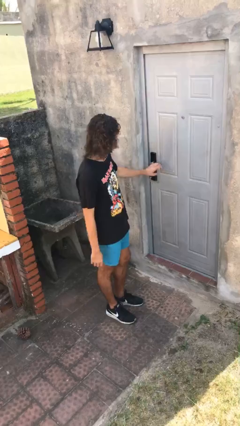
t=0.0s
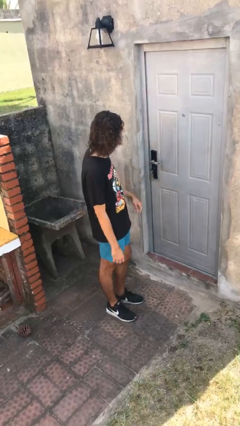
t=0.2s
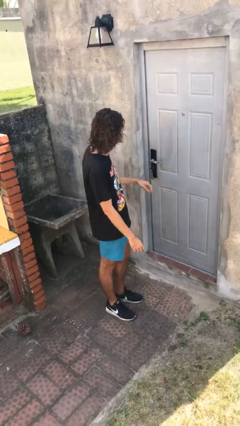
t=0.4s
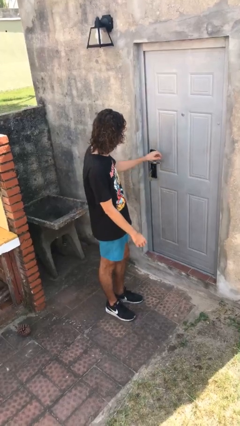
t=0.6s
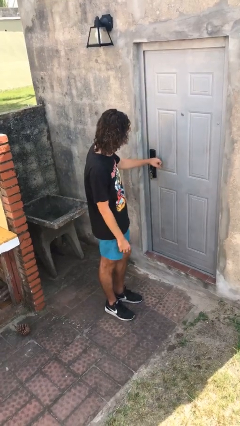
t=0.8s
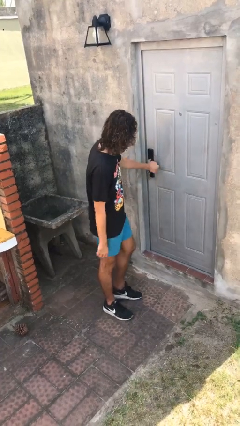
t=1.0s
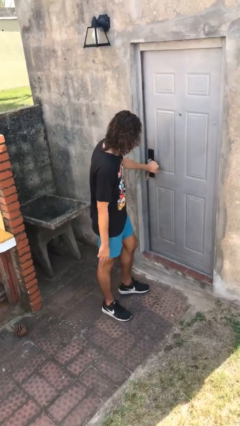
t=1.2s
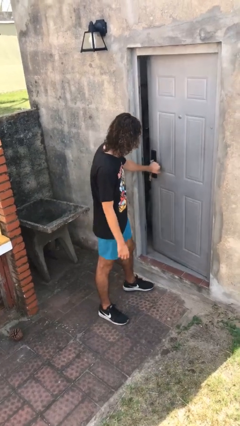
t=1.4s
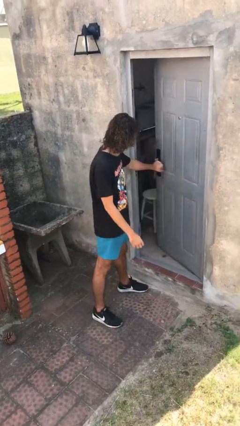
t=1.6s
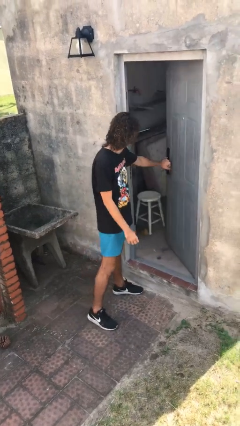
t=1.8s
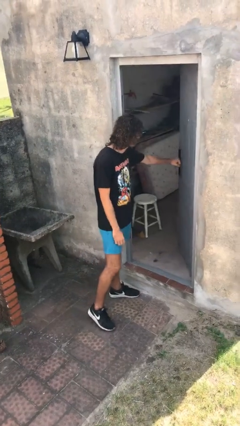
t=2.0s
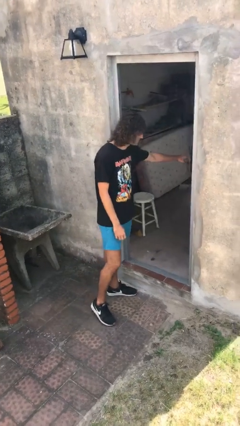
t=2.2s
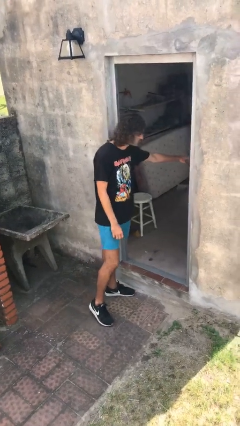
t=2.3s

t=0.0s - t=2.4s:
person opens facility door

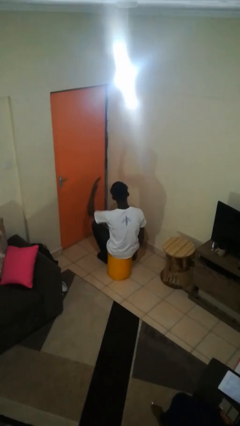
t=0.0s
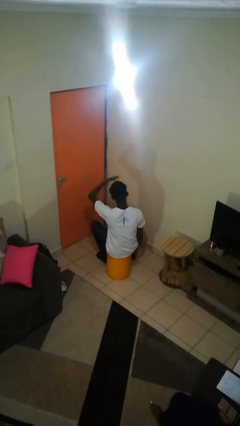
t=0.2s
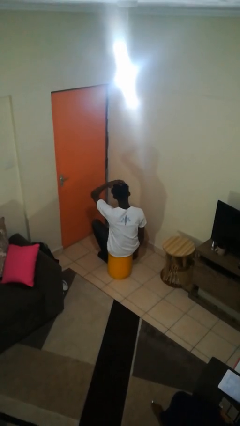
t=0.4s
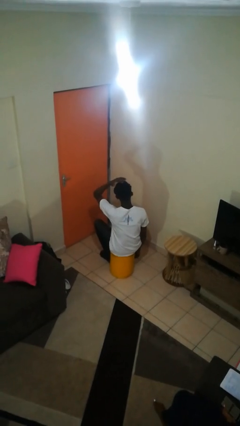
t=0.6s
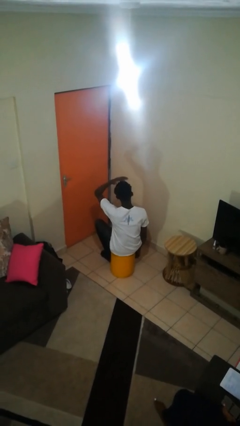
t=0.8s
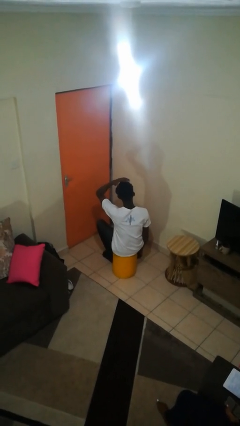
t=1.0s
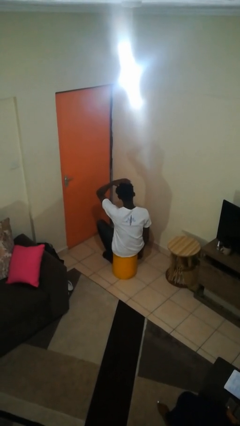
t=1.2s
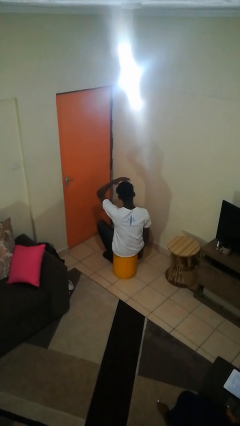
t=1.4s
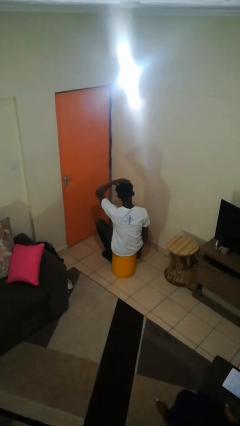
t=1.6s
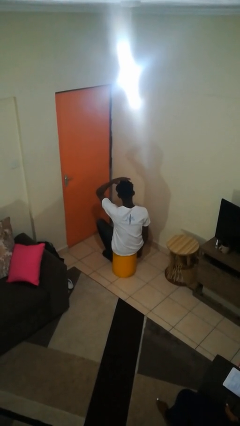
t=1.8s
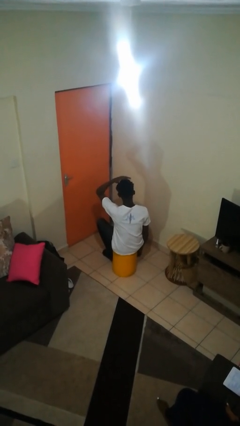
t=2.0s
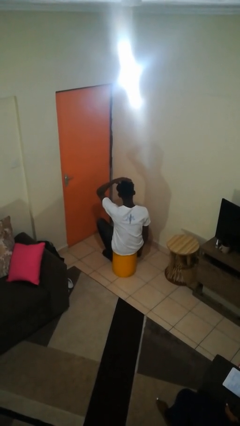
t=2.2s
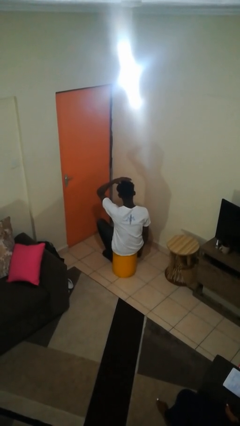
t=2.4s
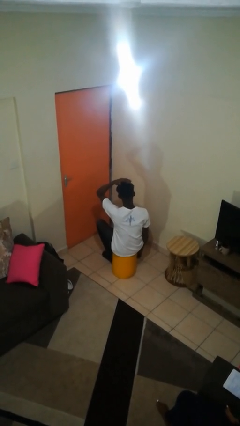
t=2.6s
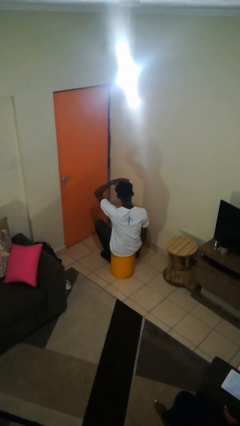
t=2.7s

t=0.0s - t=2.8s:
person pats head

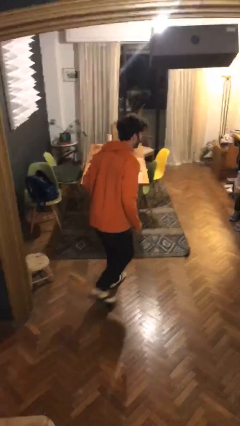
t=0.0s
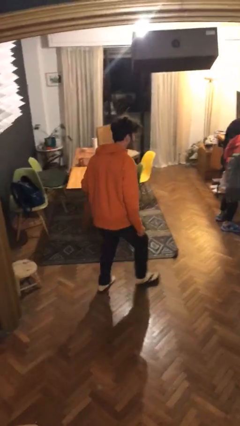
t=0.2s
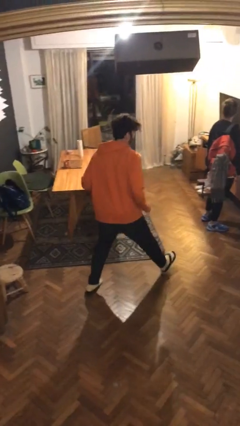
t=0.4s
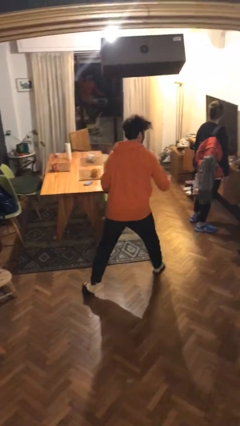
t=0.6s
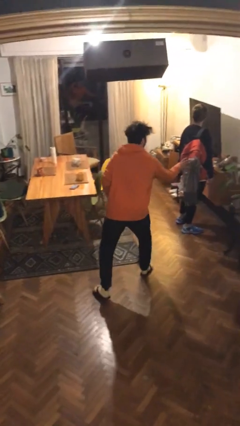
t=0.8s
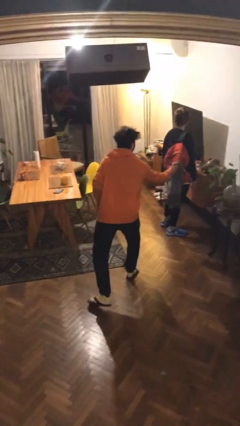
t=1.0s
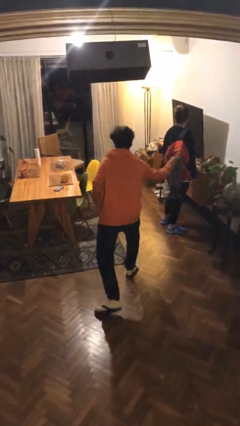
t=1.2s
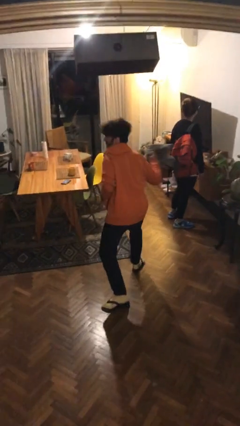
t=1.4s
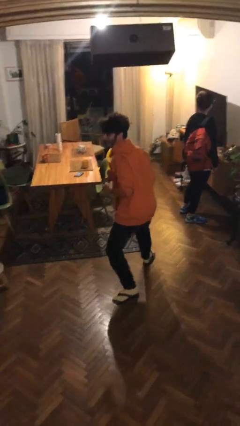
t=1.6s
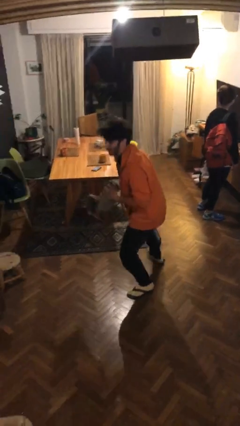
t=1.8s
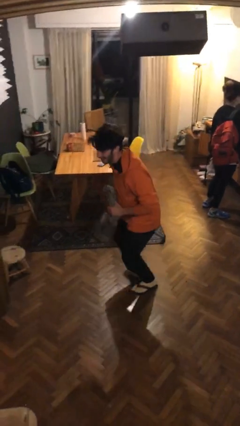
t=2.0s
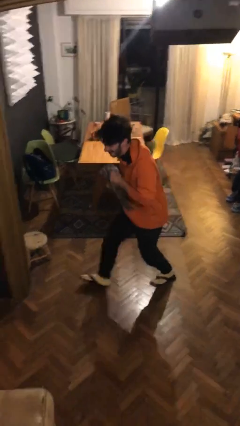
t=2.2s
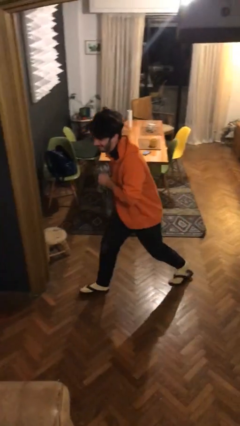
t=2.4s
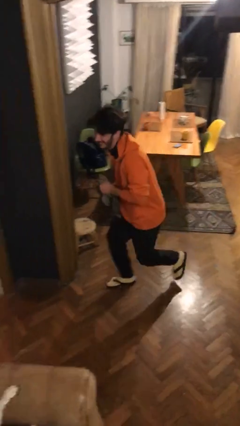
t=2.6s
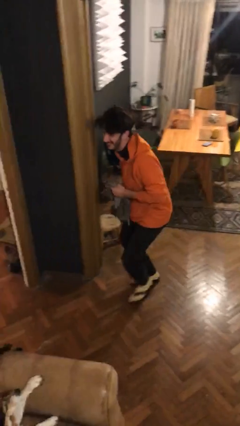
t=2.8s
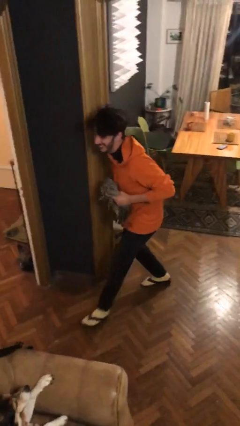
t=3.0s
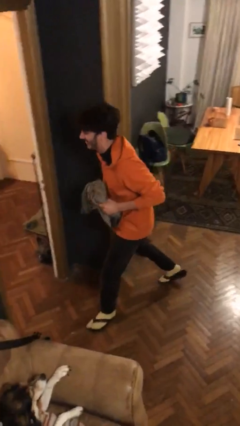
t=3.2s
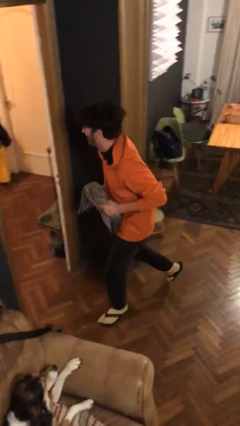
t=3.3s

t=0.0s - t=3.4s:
person steals object from person

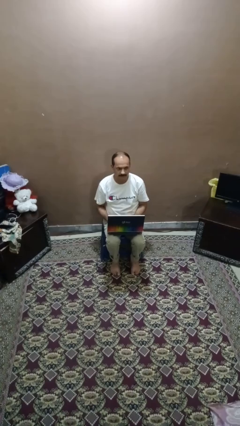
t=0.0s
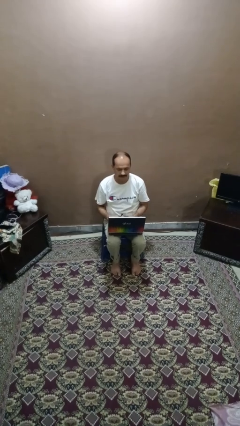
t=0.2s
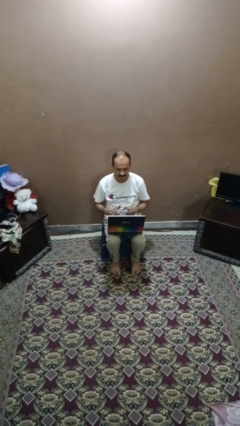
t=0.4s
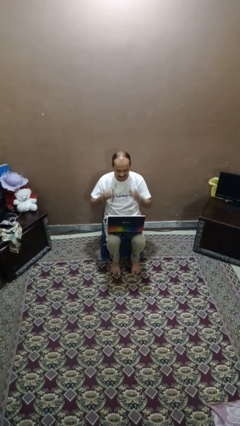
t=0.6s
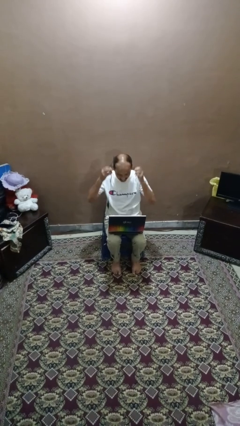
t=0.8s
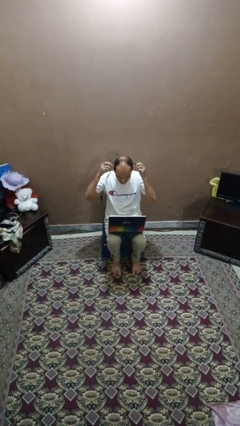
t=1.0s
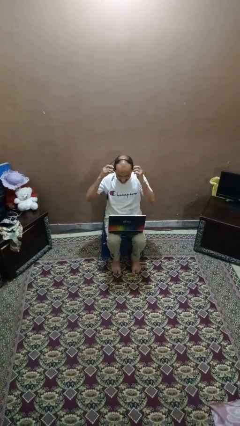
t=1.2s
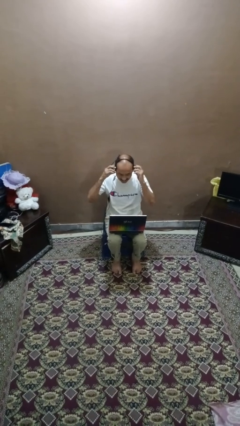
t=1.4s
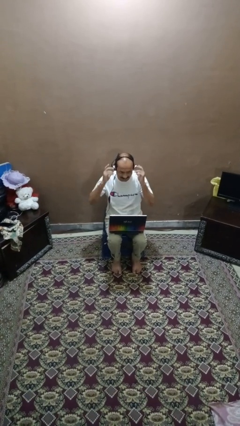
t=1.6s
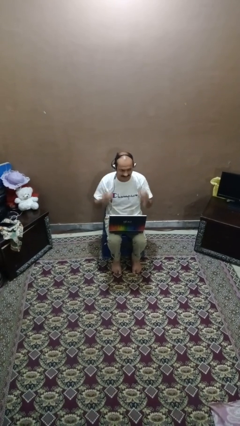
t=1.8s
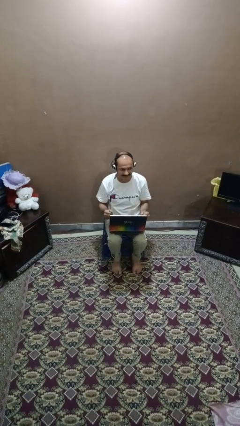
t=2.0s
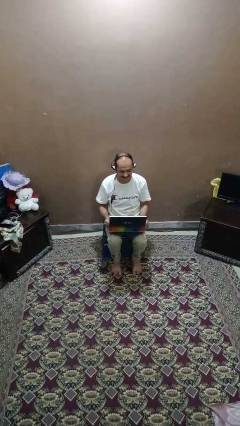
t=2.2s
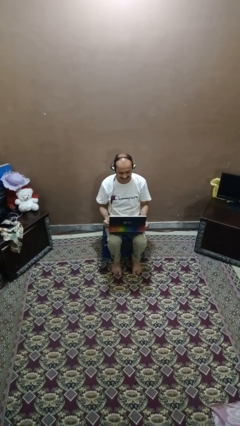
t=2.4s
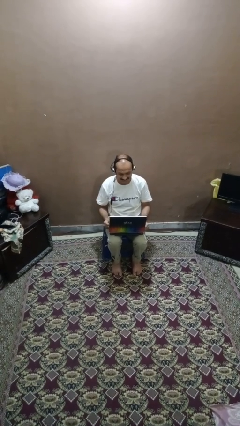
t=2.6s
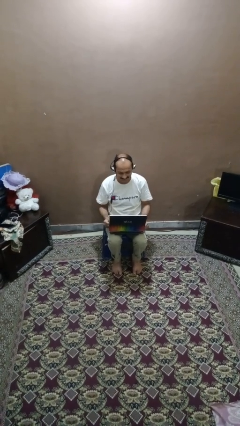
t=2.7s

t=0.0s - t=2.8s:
person puts on headphones

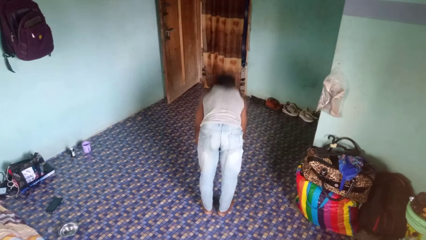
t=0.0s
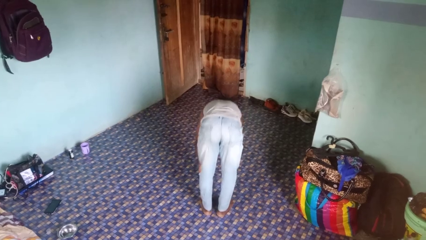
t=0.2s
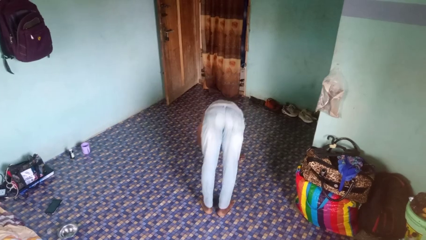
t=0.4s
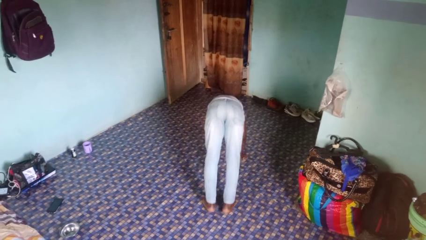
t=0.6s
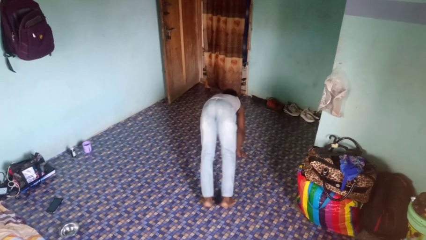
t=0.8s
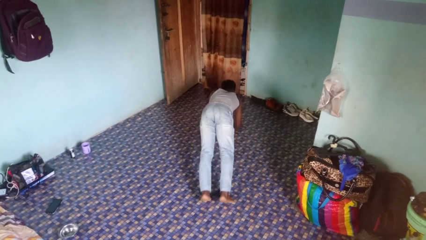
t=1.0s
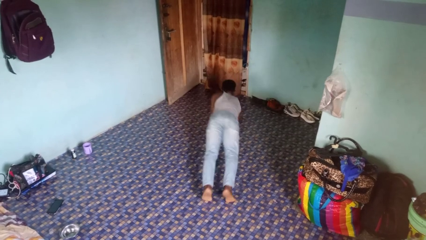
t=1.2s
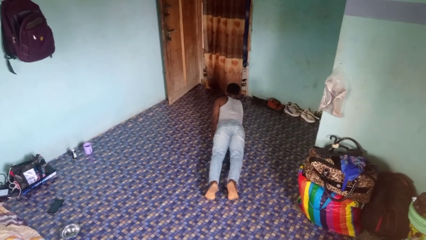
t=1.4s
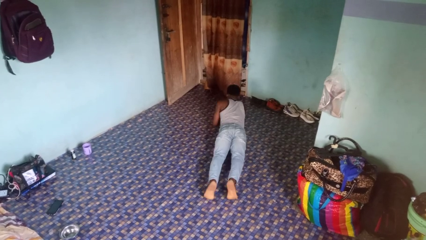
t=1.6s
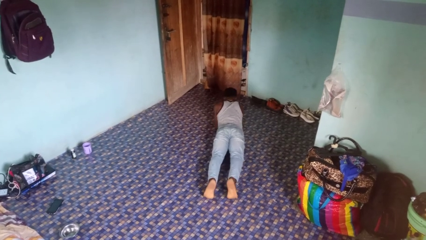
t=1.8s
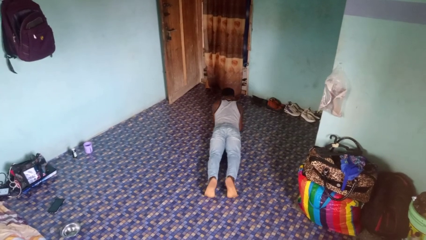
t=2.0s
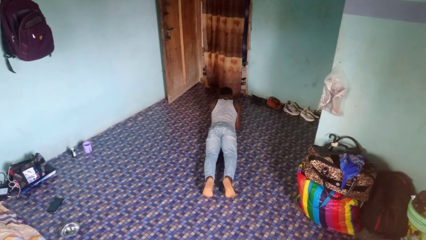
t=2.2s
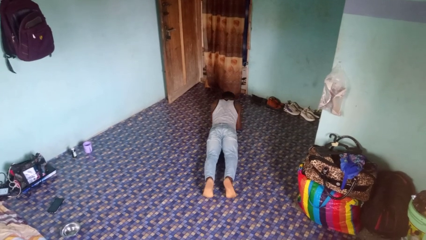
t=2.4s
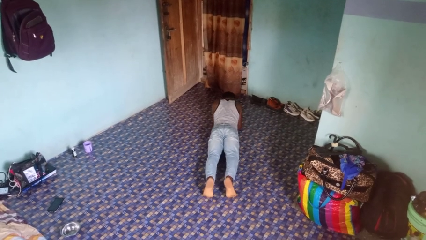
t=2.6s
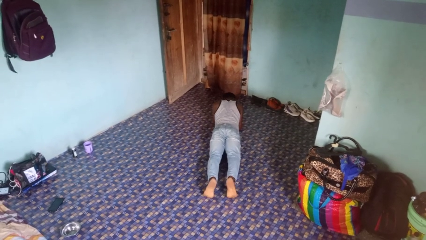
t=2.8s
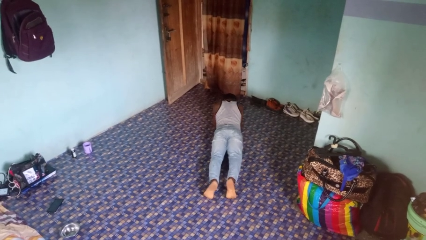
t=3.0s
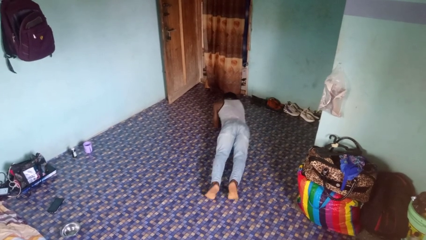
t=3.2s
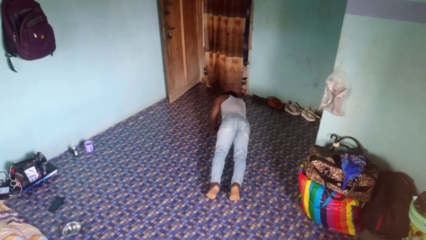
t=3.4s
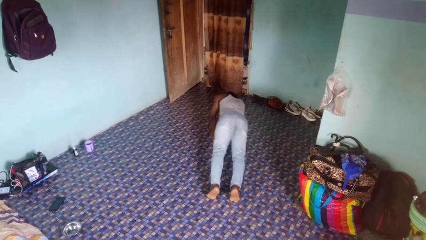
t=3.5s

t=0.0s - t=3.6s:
person exercises with plank

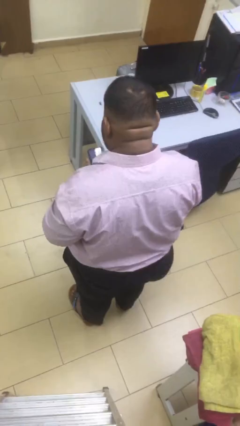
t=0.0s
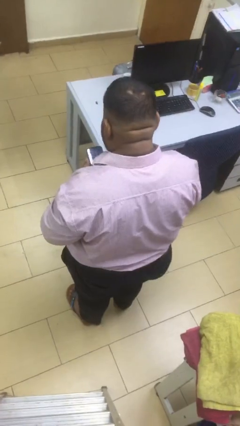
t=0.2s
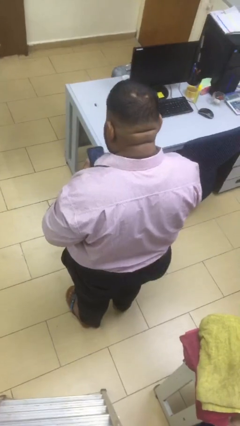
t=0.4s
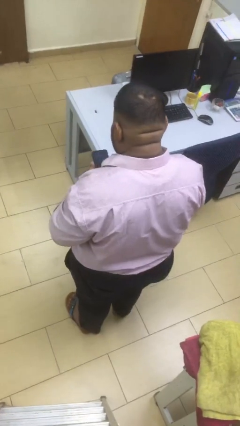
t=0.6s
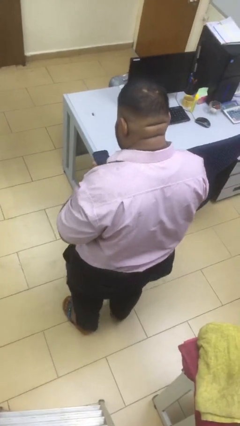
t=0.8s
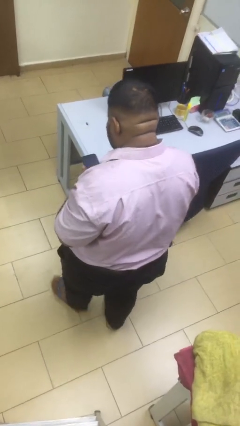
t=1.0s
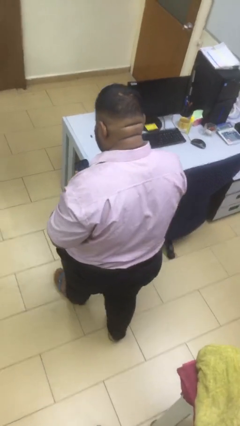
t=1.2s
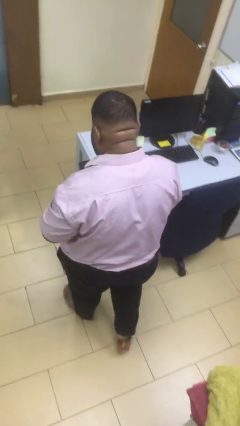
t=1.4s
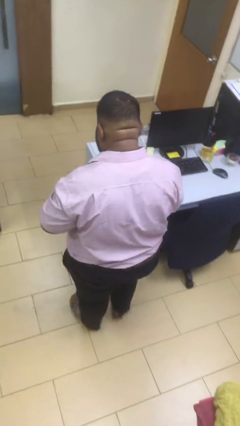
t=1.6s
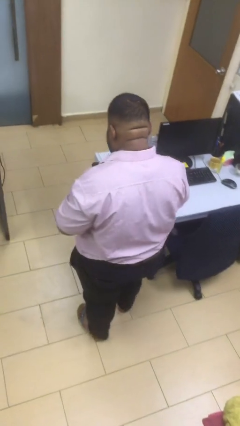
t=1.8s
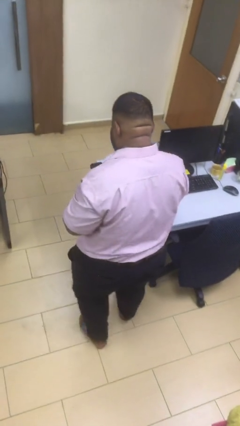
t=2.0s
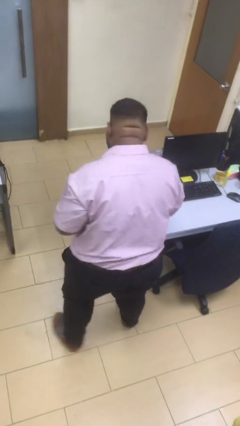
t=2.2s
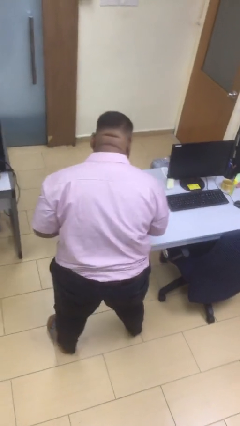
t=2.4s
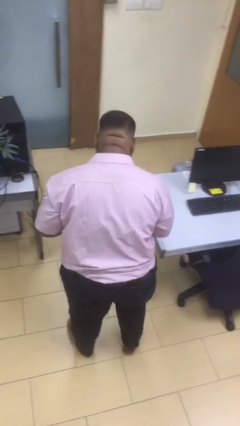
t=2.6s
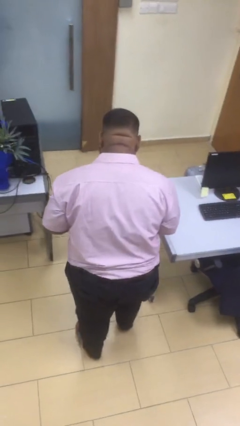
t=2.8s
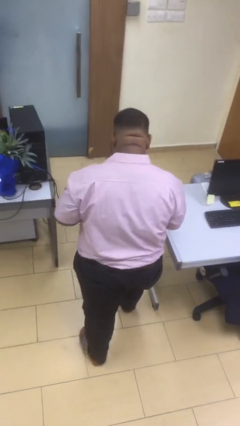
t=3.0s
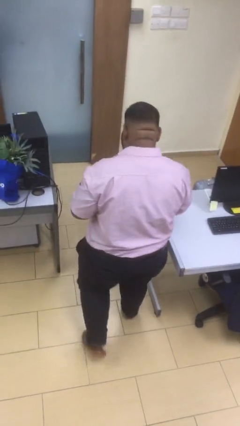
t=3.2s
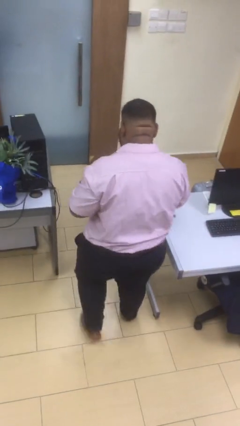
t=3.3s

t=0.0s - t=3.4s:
person bumps into table
